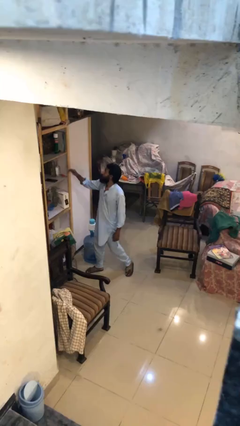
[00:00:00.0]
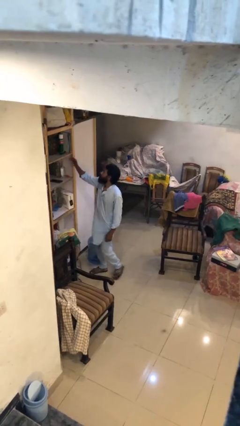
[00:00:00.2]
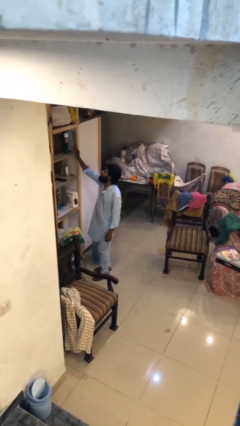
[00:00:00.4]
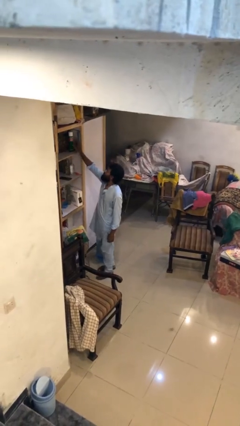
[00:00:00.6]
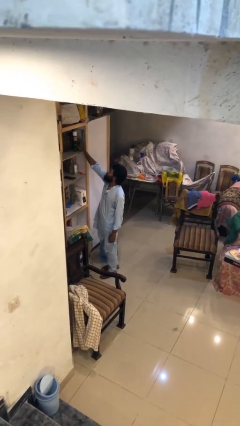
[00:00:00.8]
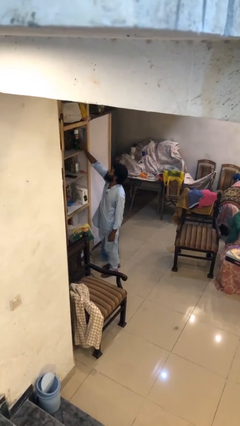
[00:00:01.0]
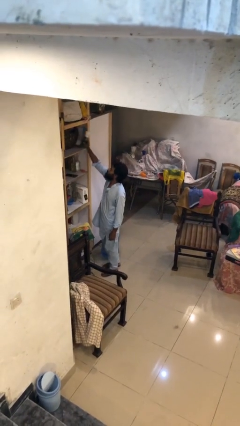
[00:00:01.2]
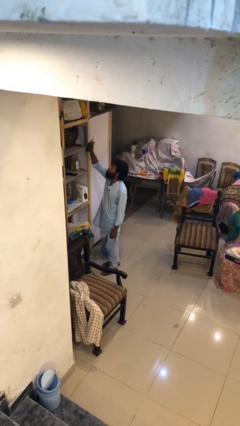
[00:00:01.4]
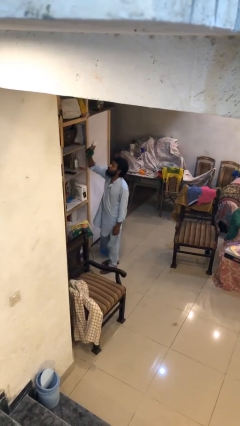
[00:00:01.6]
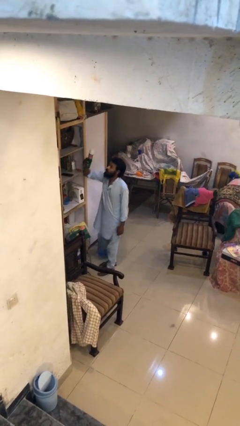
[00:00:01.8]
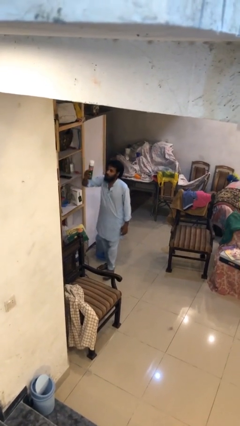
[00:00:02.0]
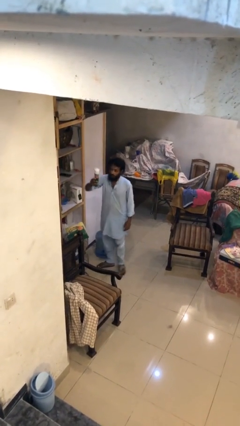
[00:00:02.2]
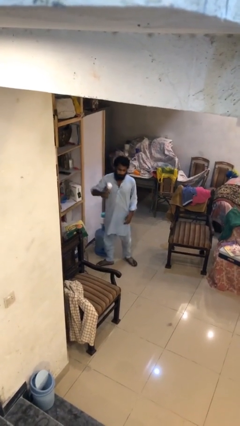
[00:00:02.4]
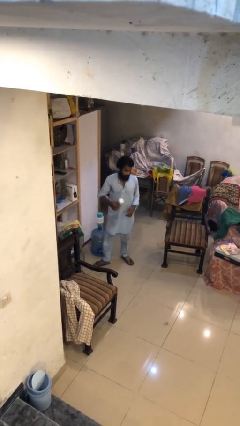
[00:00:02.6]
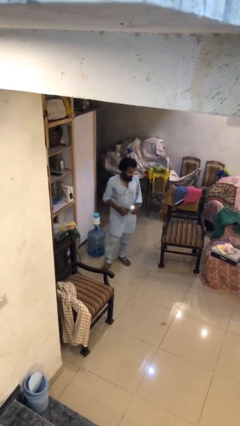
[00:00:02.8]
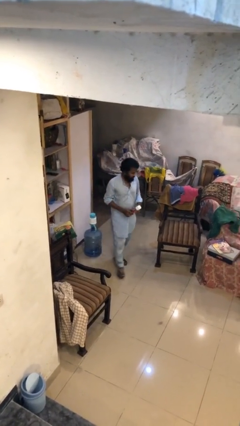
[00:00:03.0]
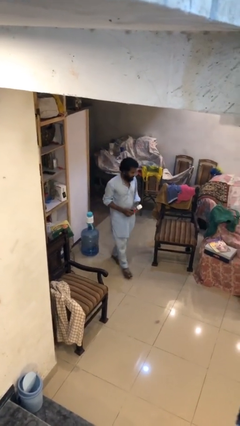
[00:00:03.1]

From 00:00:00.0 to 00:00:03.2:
person picks up object from shelf

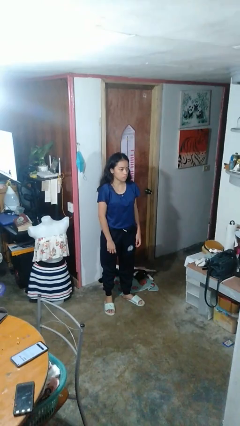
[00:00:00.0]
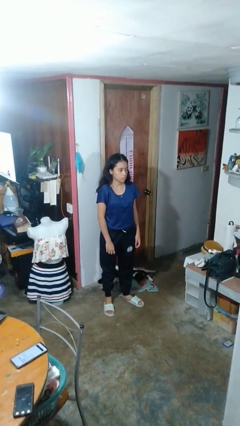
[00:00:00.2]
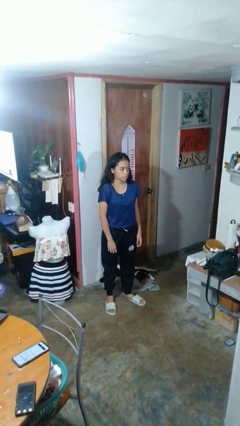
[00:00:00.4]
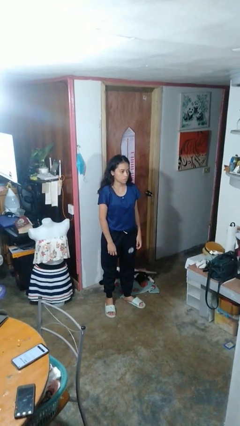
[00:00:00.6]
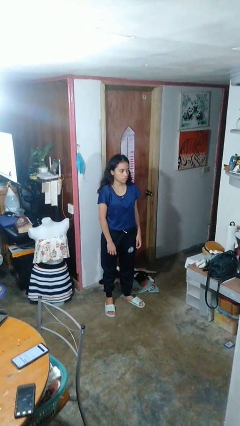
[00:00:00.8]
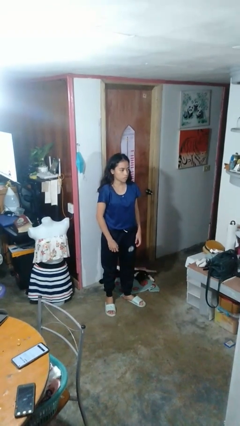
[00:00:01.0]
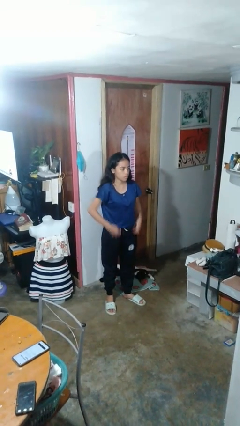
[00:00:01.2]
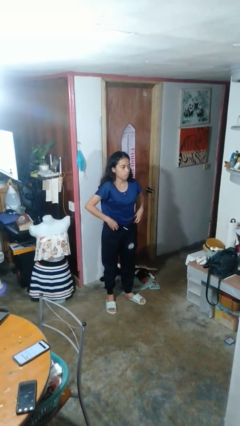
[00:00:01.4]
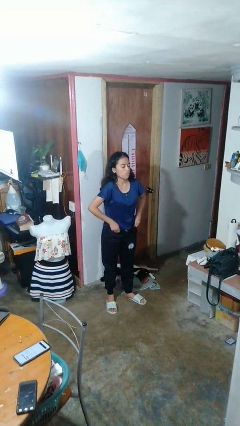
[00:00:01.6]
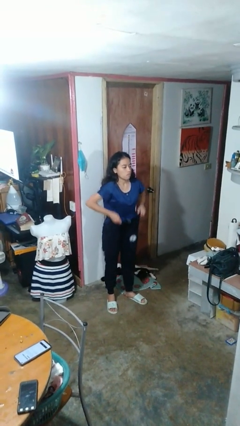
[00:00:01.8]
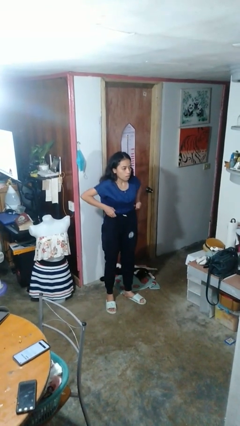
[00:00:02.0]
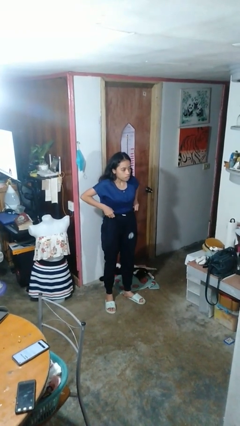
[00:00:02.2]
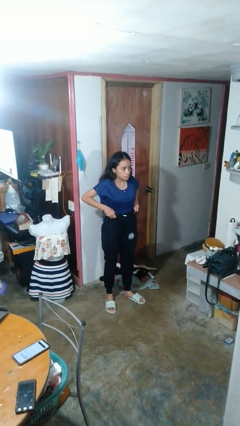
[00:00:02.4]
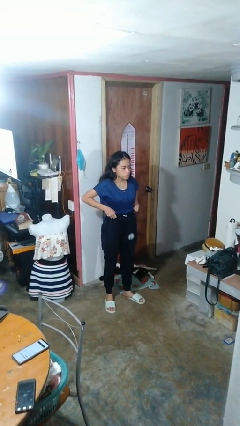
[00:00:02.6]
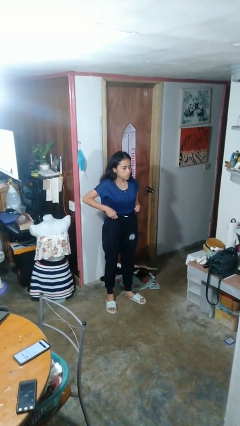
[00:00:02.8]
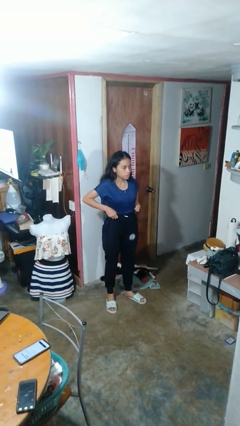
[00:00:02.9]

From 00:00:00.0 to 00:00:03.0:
person hikes up pants

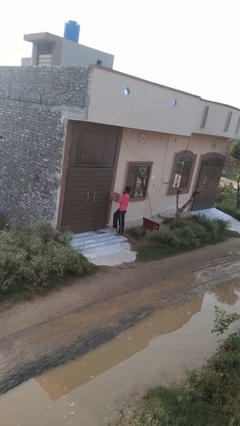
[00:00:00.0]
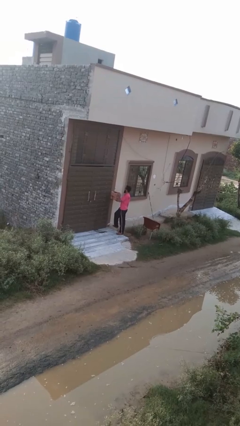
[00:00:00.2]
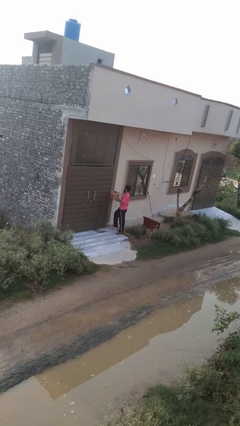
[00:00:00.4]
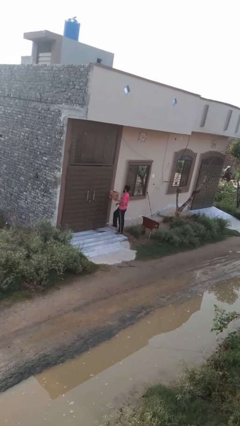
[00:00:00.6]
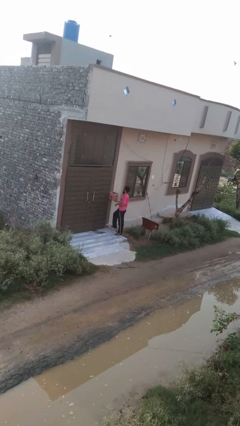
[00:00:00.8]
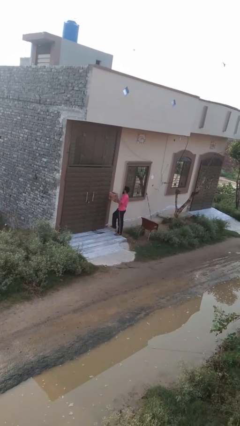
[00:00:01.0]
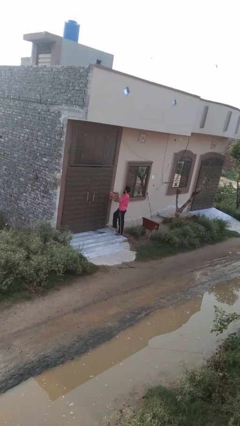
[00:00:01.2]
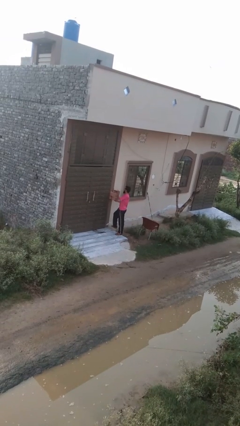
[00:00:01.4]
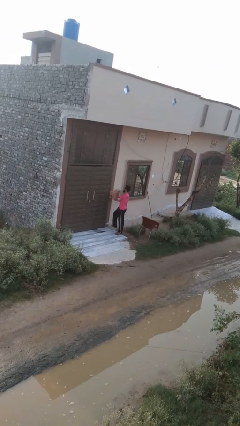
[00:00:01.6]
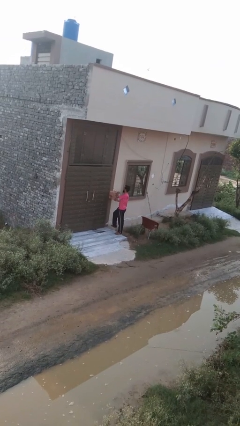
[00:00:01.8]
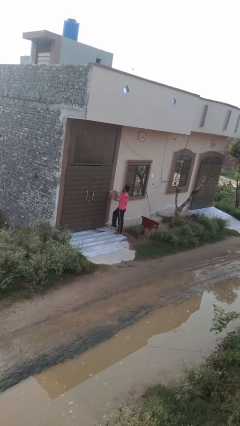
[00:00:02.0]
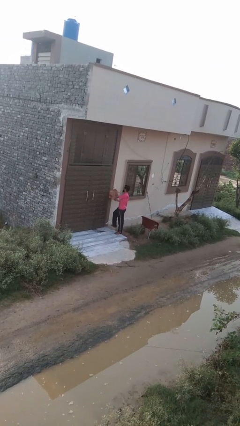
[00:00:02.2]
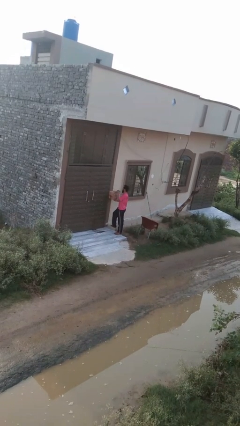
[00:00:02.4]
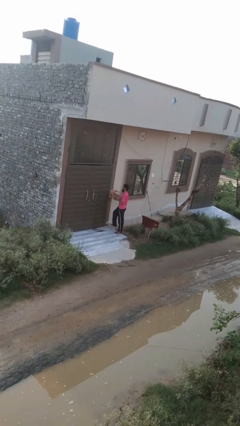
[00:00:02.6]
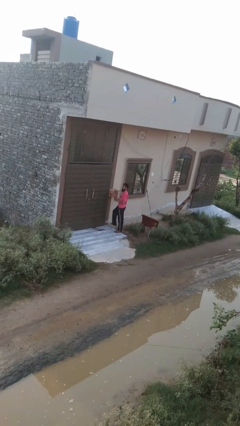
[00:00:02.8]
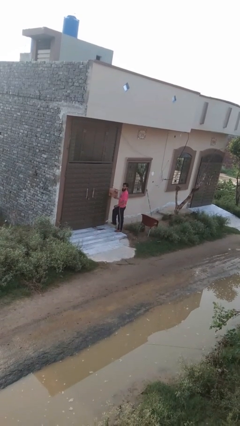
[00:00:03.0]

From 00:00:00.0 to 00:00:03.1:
person opens mailbox

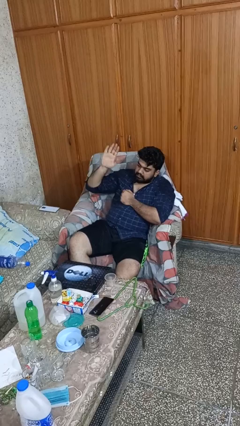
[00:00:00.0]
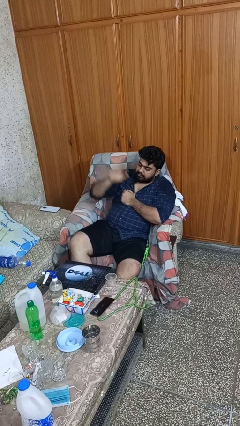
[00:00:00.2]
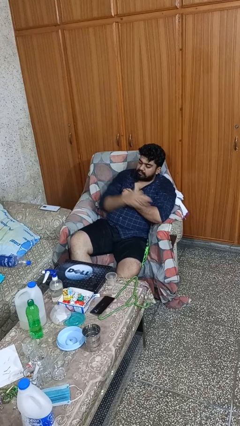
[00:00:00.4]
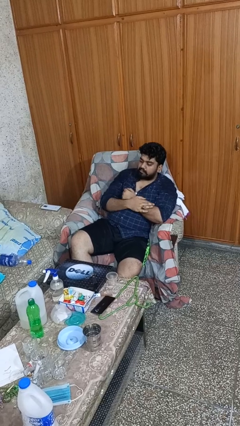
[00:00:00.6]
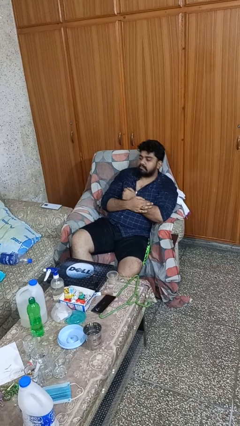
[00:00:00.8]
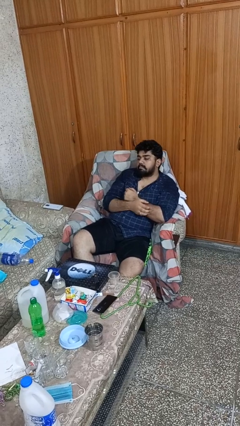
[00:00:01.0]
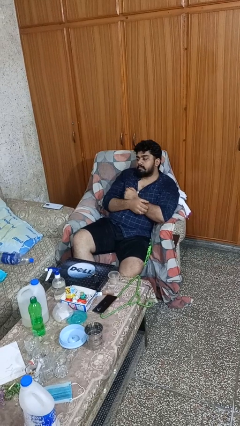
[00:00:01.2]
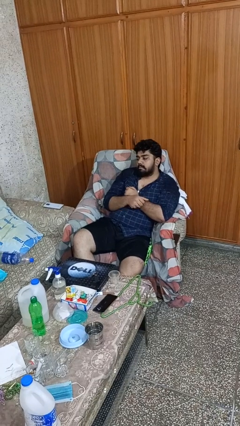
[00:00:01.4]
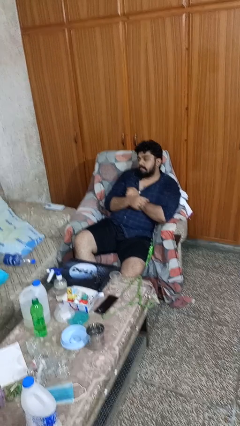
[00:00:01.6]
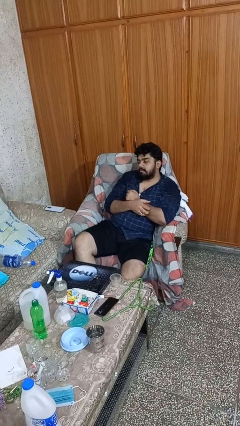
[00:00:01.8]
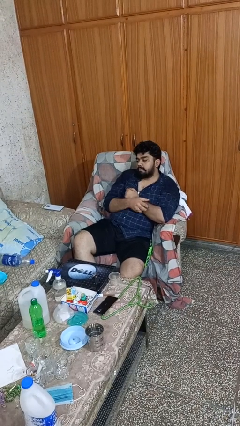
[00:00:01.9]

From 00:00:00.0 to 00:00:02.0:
person gestures lower hand

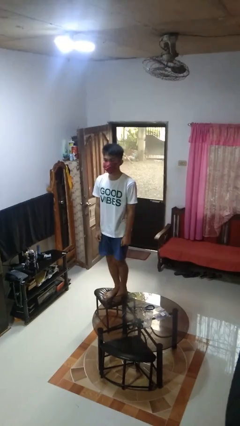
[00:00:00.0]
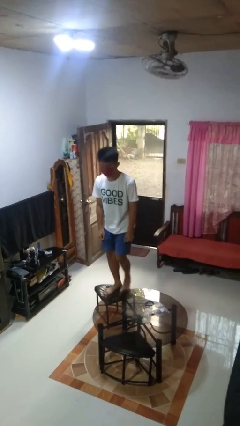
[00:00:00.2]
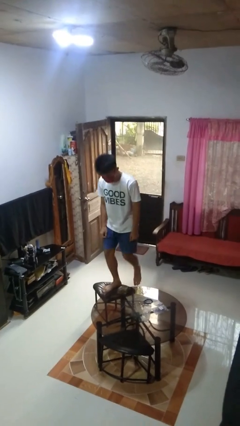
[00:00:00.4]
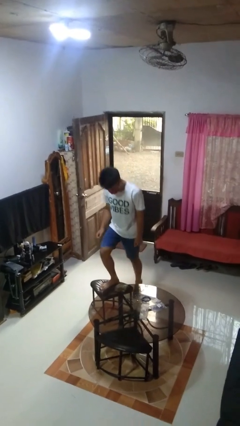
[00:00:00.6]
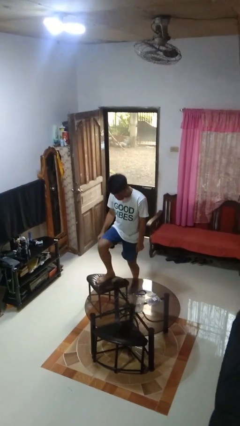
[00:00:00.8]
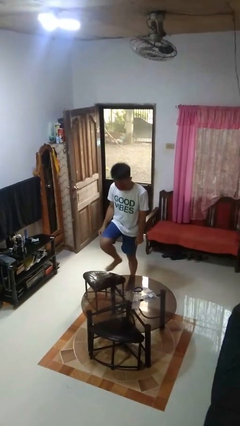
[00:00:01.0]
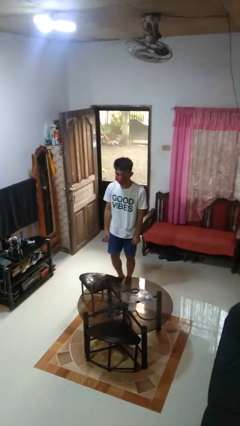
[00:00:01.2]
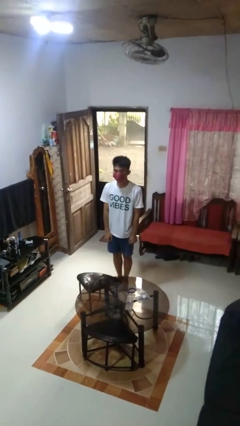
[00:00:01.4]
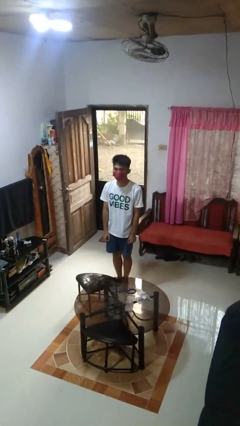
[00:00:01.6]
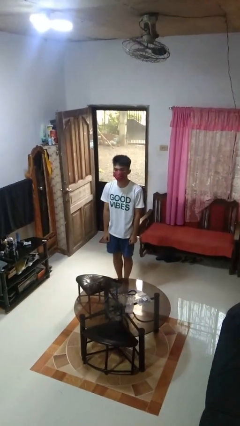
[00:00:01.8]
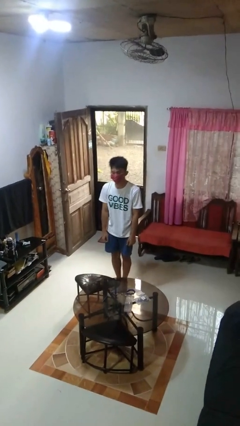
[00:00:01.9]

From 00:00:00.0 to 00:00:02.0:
person climbs off chair

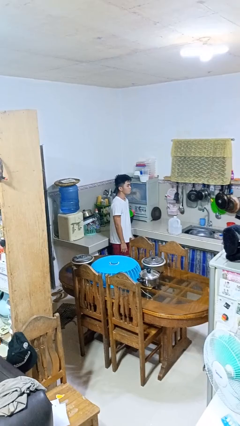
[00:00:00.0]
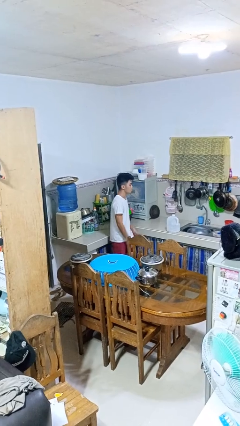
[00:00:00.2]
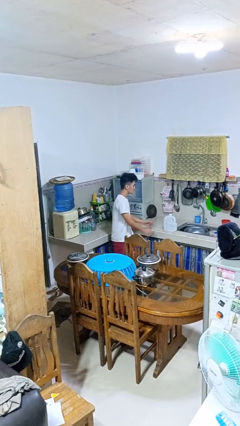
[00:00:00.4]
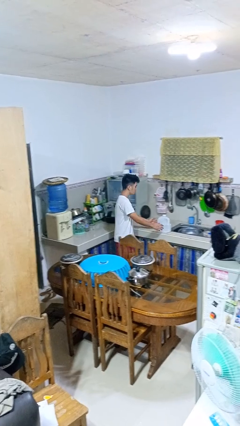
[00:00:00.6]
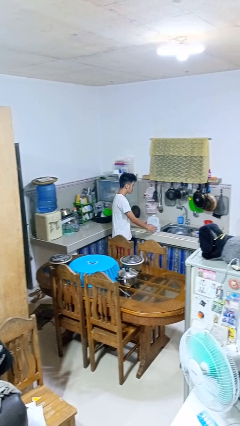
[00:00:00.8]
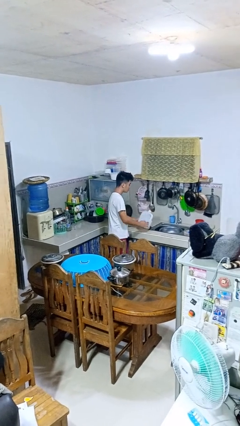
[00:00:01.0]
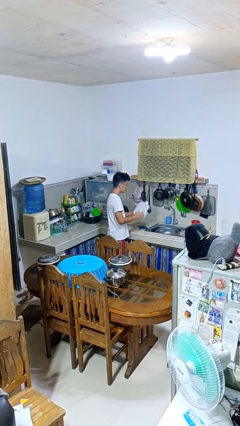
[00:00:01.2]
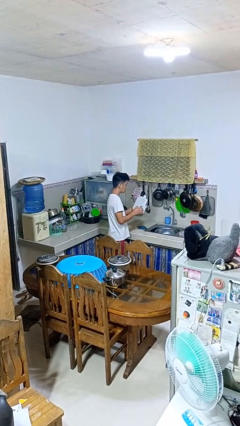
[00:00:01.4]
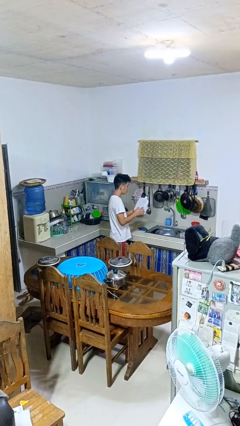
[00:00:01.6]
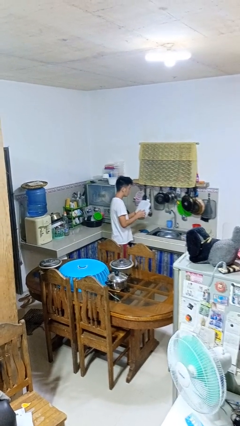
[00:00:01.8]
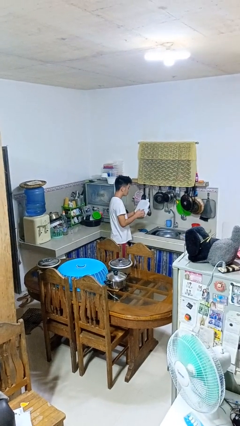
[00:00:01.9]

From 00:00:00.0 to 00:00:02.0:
person picks up object from countertop

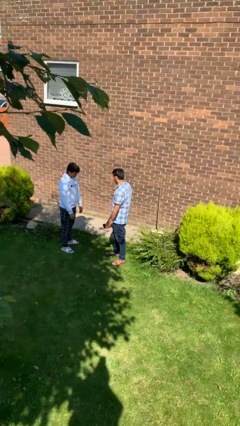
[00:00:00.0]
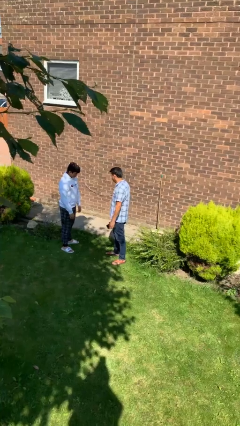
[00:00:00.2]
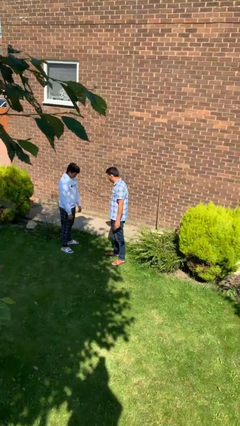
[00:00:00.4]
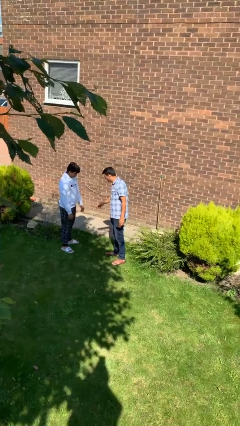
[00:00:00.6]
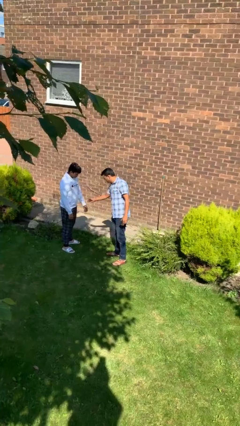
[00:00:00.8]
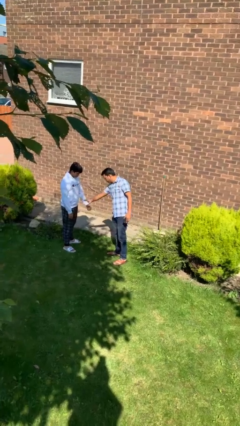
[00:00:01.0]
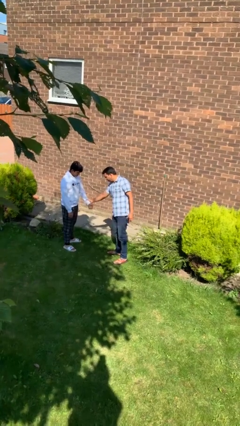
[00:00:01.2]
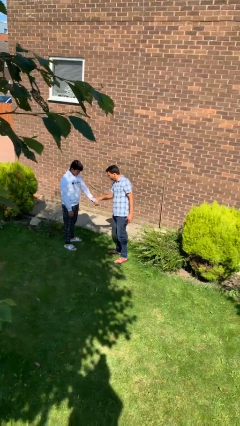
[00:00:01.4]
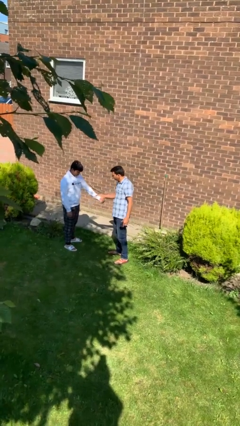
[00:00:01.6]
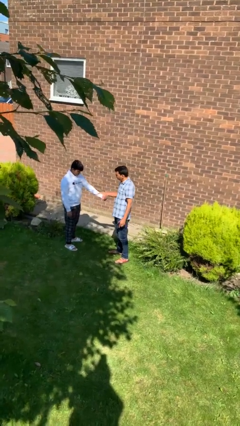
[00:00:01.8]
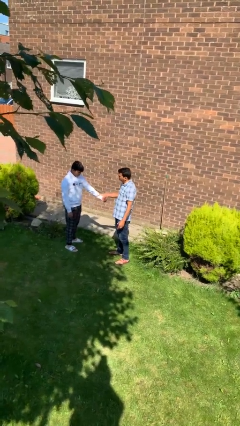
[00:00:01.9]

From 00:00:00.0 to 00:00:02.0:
person grabs person by forearm
